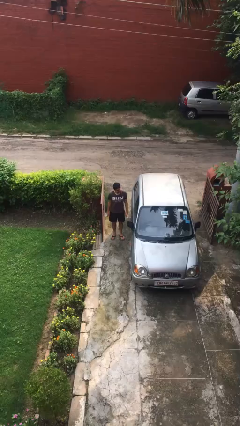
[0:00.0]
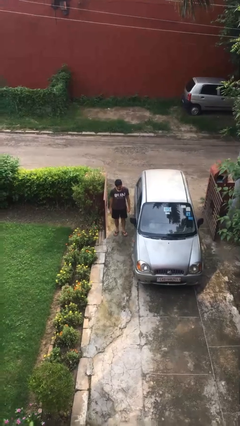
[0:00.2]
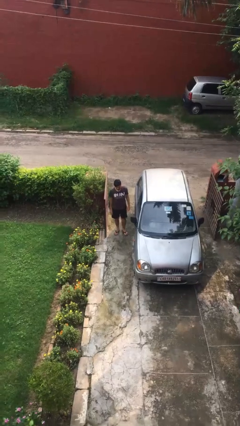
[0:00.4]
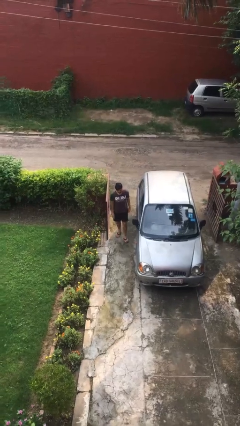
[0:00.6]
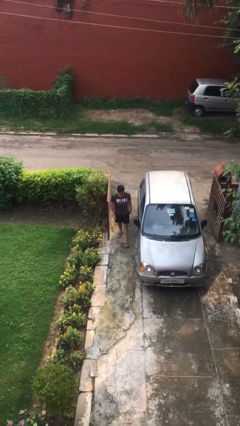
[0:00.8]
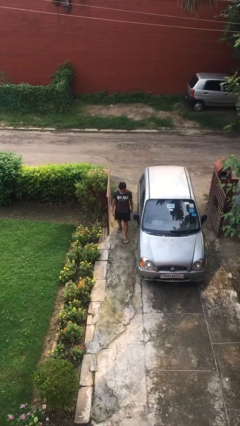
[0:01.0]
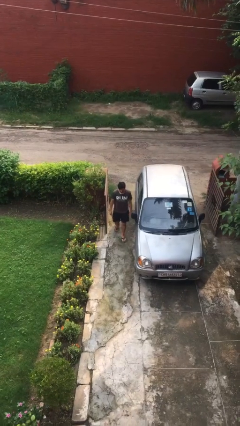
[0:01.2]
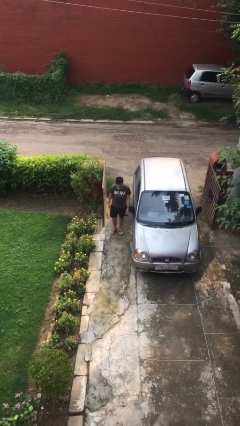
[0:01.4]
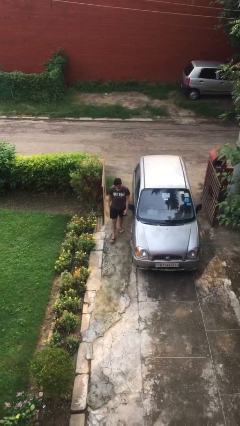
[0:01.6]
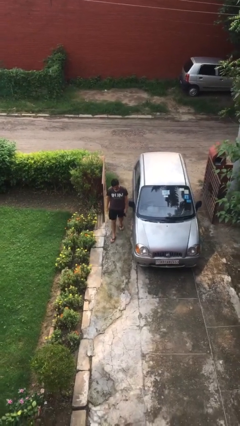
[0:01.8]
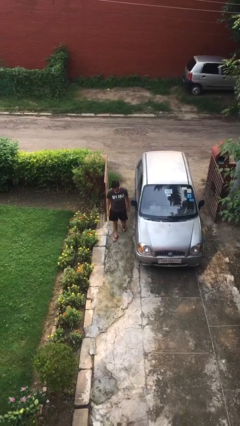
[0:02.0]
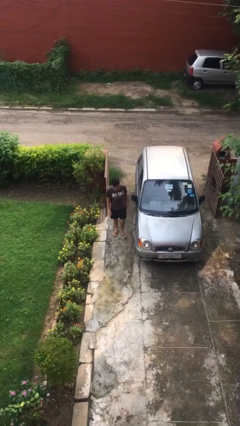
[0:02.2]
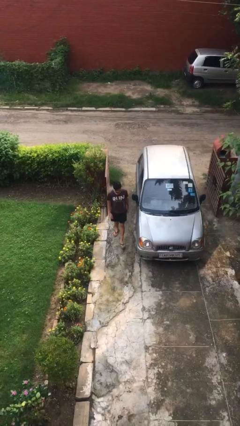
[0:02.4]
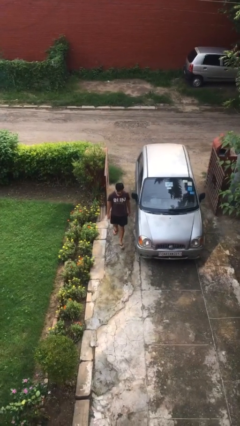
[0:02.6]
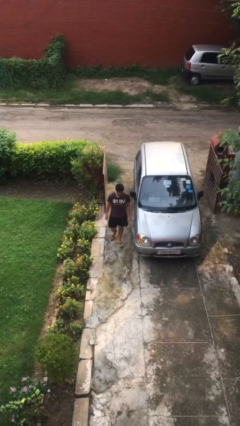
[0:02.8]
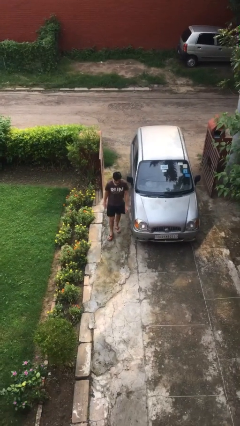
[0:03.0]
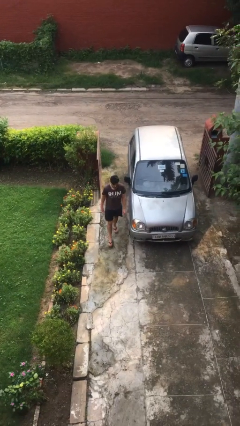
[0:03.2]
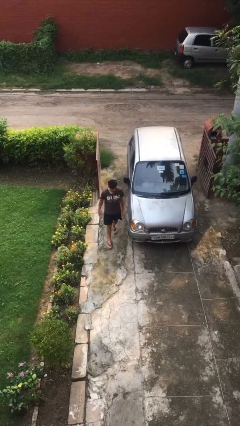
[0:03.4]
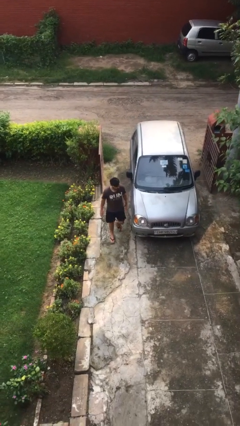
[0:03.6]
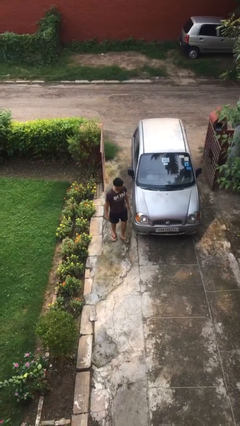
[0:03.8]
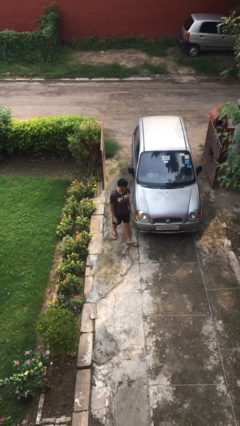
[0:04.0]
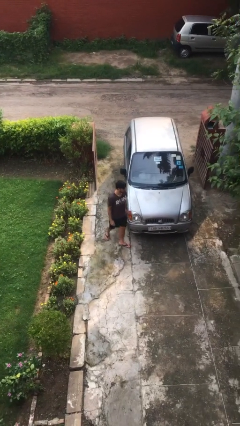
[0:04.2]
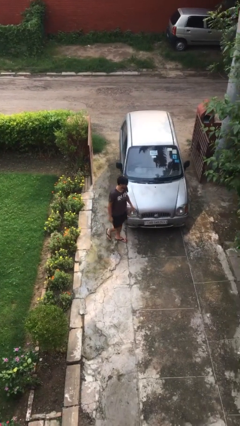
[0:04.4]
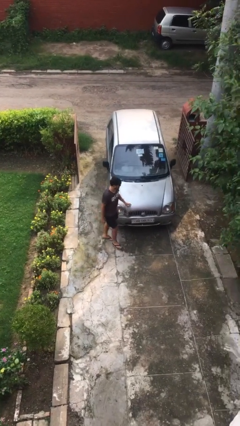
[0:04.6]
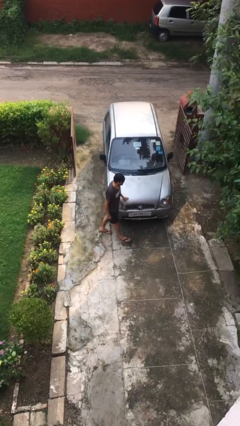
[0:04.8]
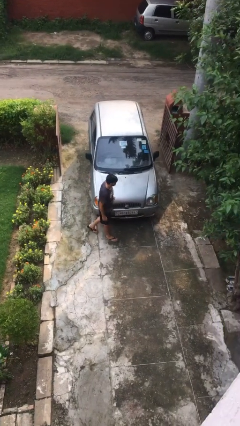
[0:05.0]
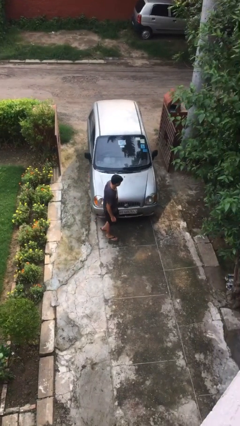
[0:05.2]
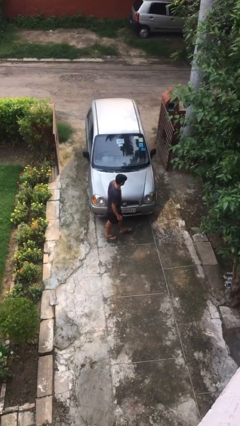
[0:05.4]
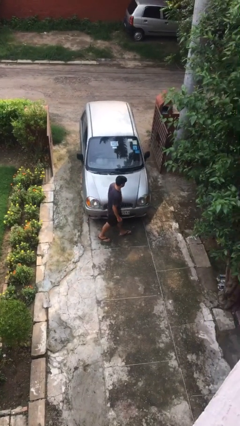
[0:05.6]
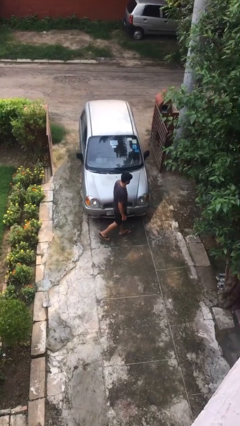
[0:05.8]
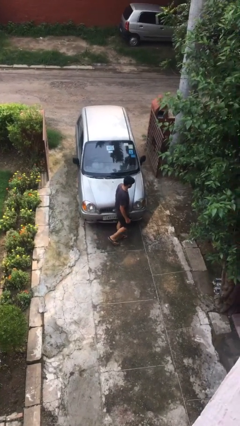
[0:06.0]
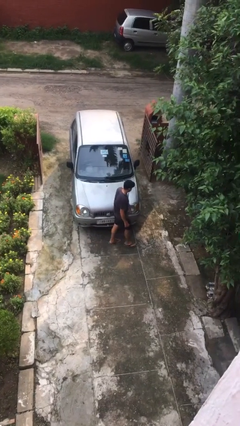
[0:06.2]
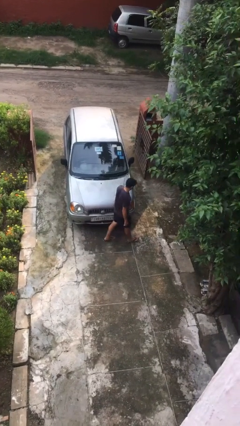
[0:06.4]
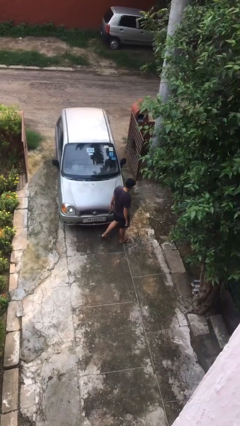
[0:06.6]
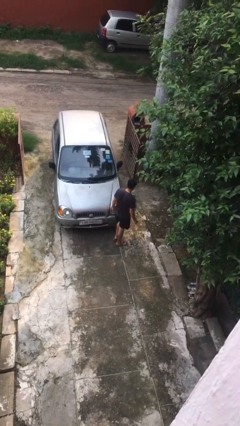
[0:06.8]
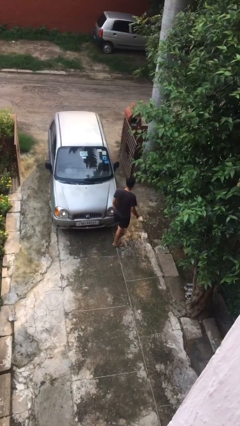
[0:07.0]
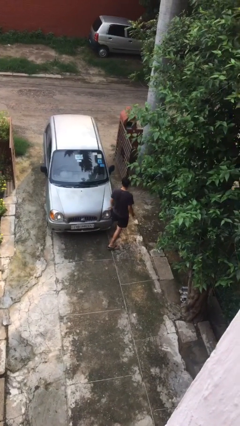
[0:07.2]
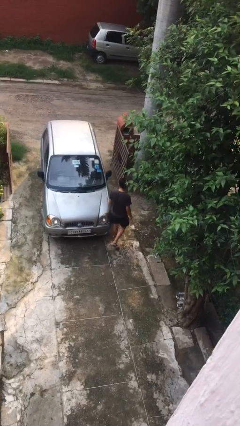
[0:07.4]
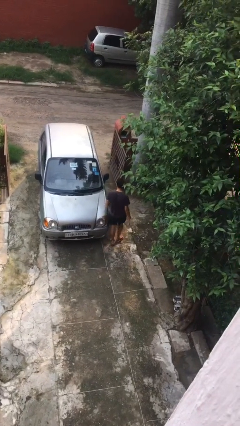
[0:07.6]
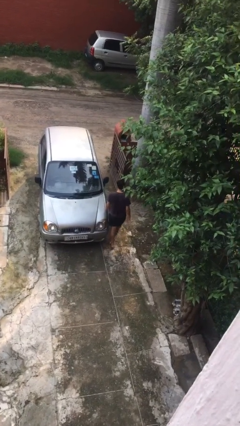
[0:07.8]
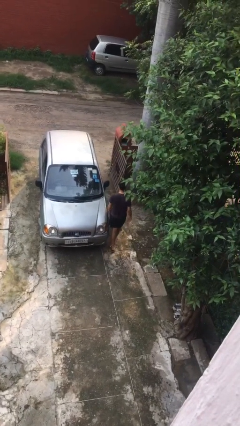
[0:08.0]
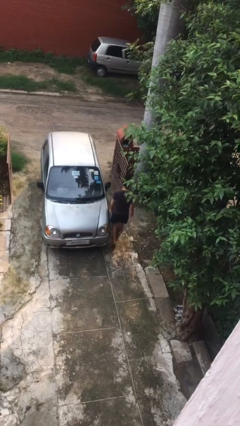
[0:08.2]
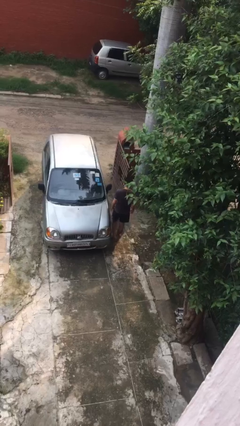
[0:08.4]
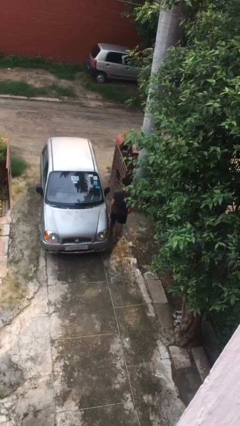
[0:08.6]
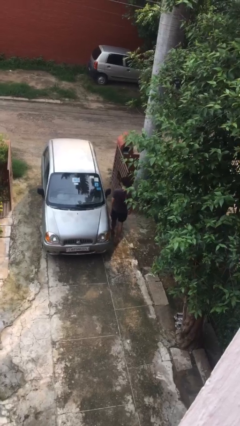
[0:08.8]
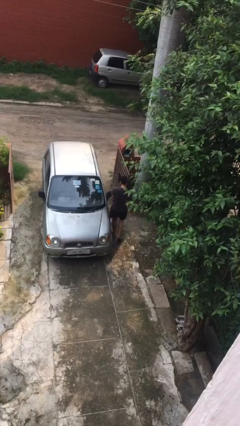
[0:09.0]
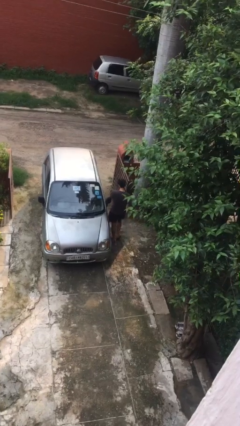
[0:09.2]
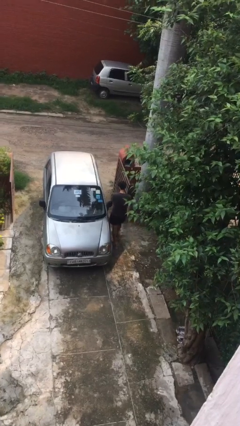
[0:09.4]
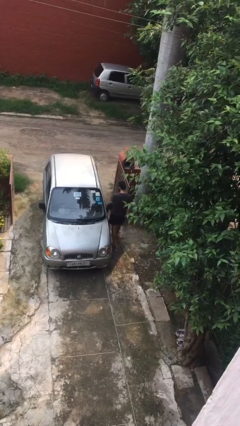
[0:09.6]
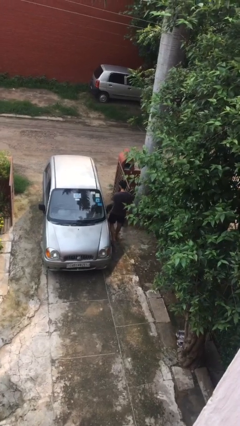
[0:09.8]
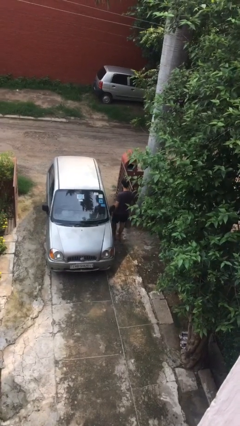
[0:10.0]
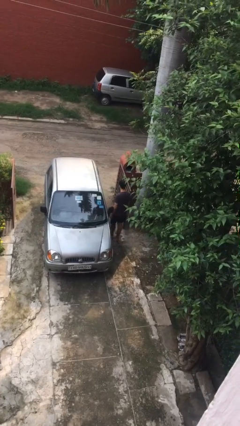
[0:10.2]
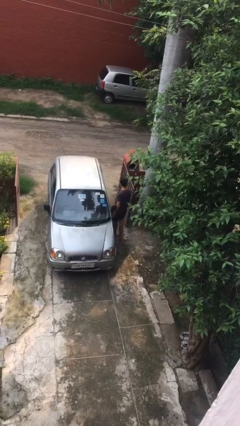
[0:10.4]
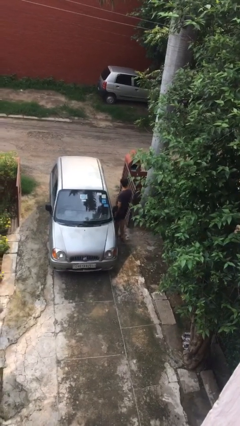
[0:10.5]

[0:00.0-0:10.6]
person walks around car

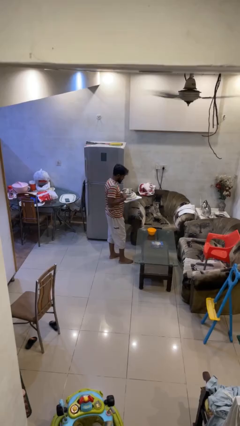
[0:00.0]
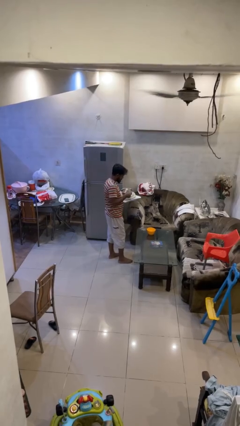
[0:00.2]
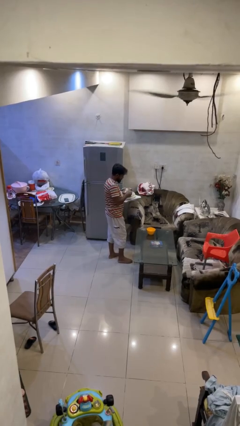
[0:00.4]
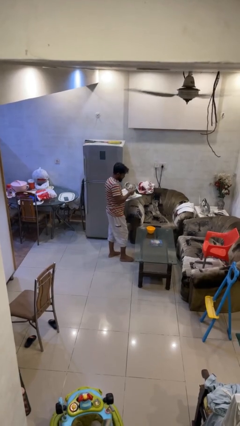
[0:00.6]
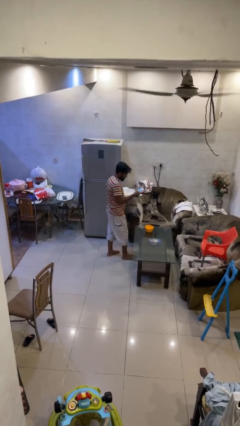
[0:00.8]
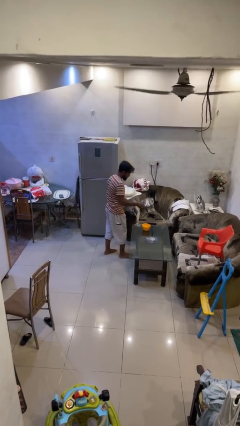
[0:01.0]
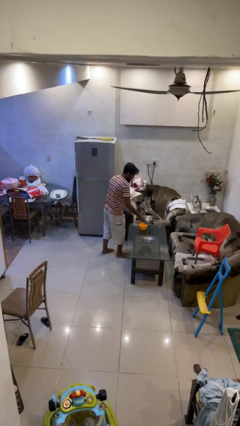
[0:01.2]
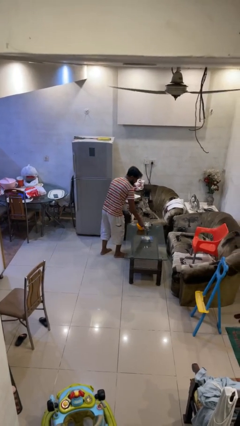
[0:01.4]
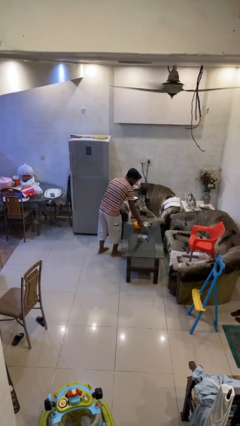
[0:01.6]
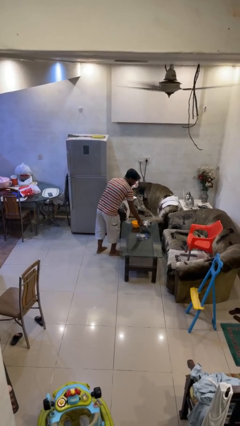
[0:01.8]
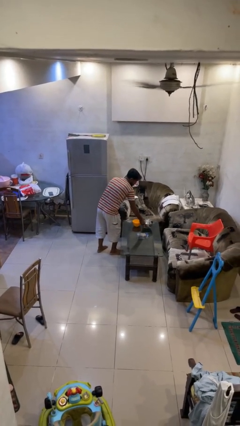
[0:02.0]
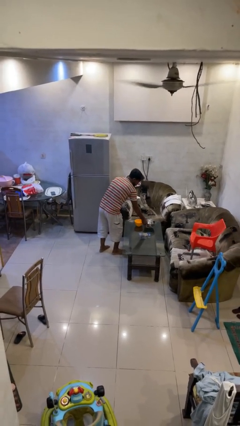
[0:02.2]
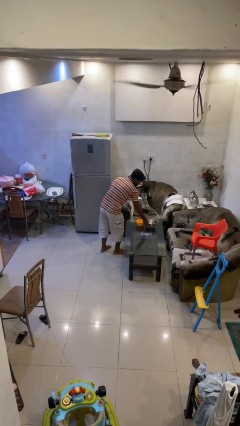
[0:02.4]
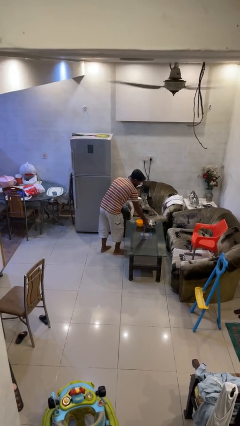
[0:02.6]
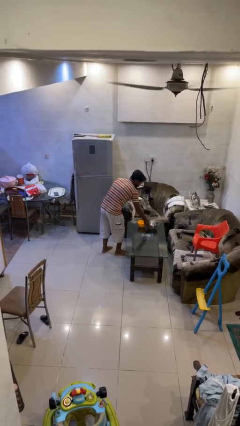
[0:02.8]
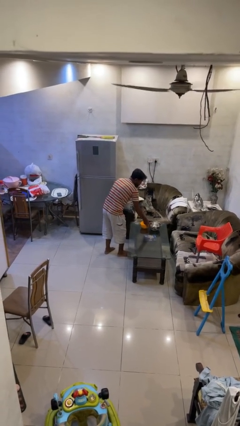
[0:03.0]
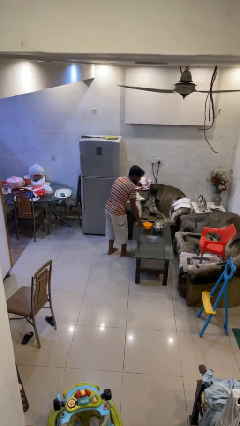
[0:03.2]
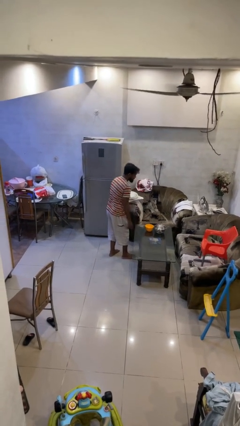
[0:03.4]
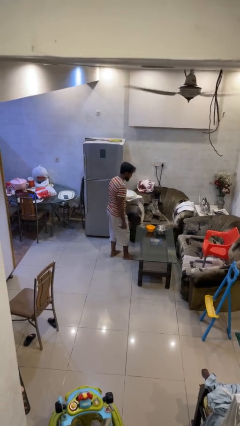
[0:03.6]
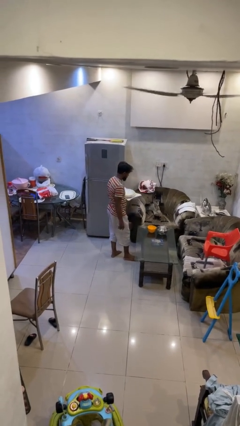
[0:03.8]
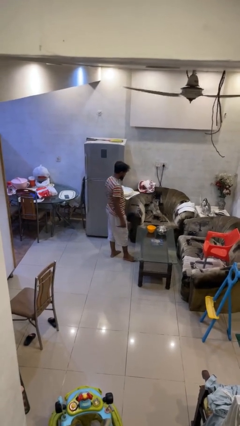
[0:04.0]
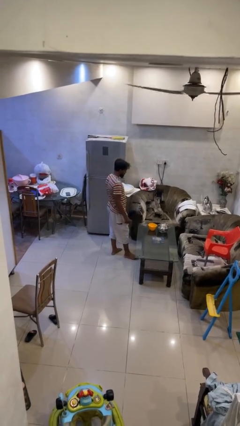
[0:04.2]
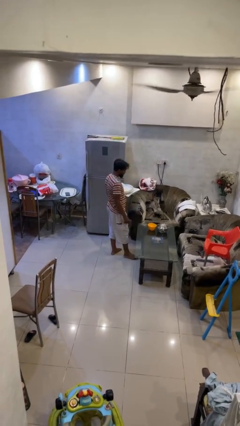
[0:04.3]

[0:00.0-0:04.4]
person sets table

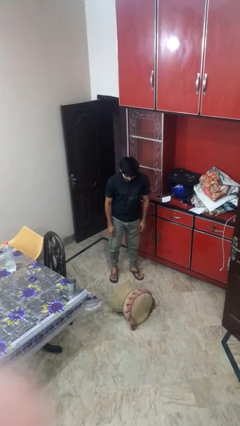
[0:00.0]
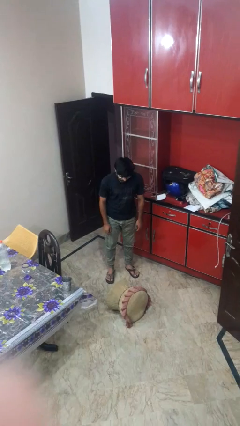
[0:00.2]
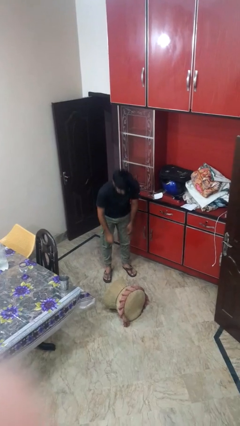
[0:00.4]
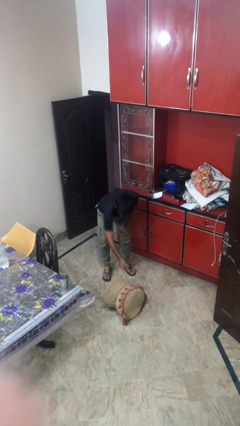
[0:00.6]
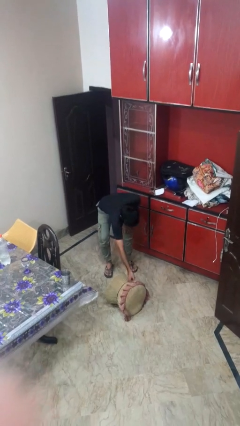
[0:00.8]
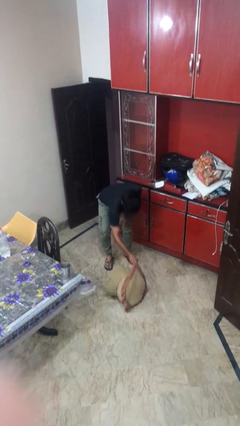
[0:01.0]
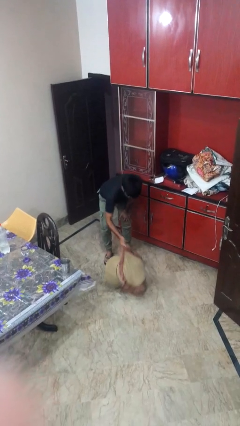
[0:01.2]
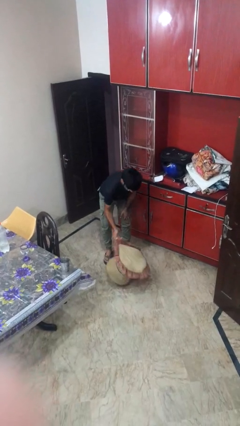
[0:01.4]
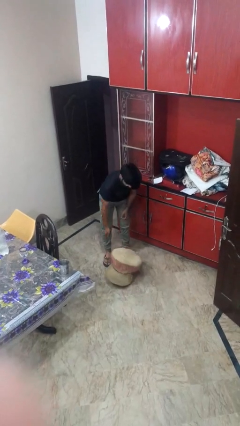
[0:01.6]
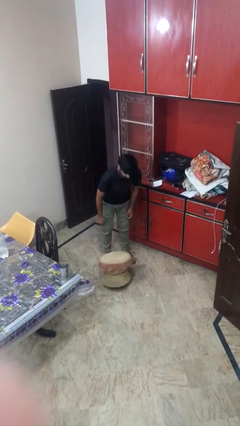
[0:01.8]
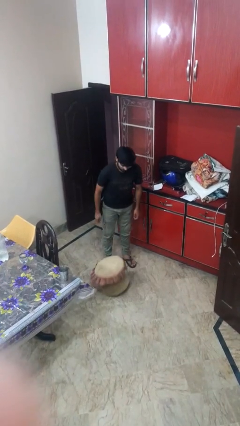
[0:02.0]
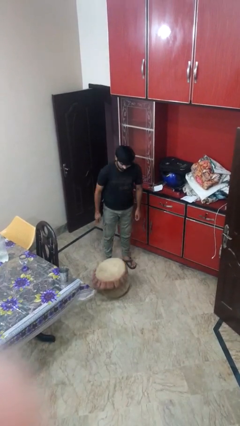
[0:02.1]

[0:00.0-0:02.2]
person sets upright furniture

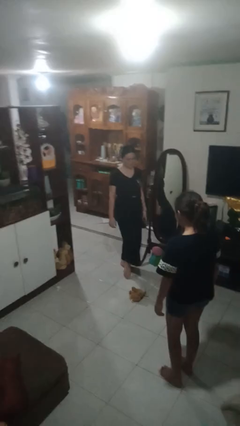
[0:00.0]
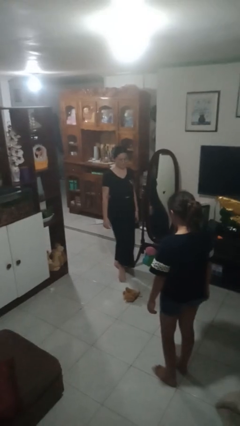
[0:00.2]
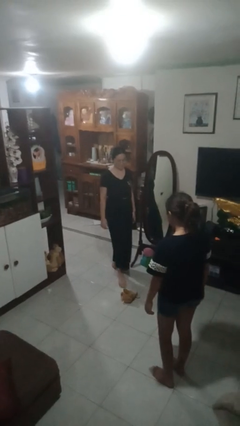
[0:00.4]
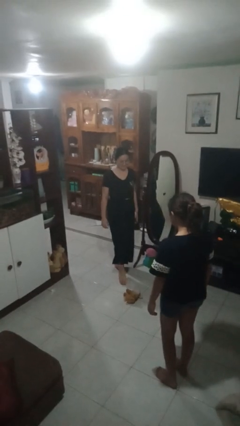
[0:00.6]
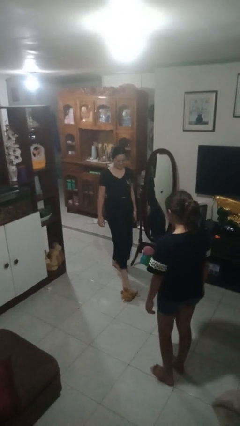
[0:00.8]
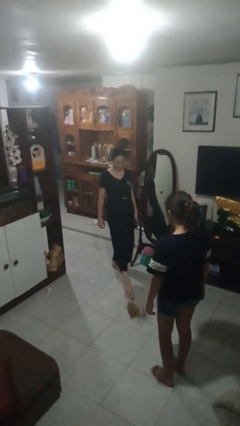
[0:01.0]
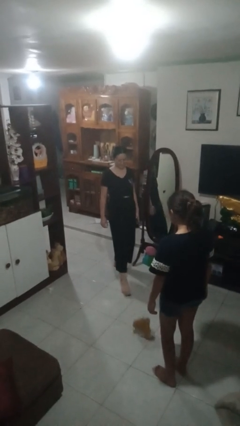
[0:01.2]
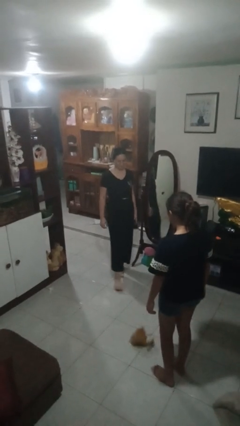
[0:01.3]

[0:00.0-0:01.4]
person kicks object to person
